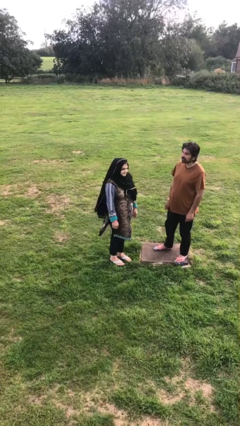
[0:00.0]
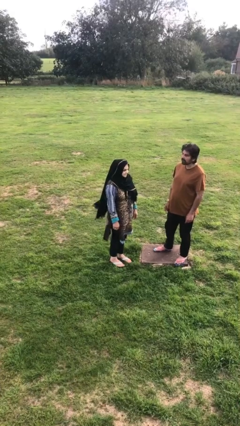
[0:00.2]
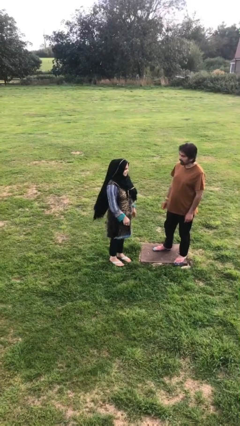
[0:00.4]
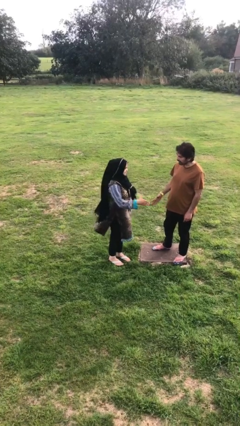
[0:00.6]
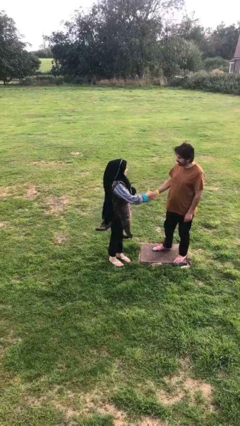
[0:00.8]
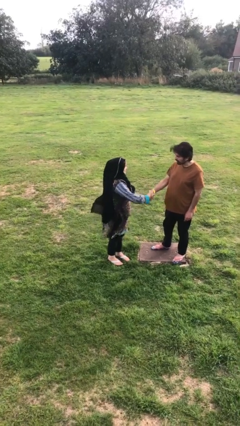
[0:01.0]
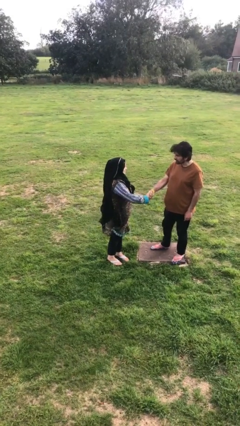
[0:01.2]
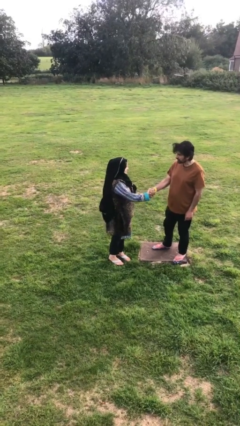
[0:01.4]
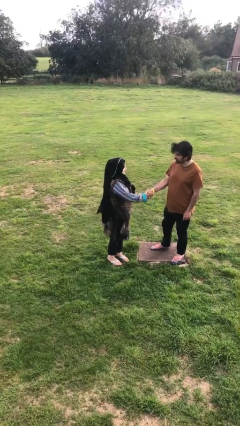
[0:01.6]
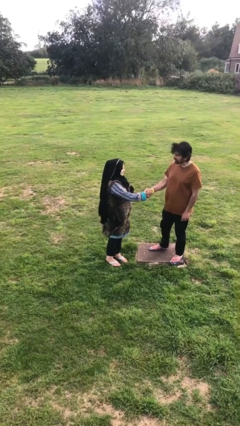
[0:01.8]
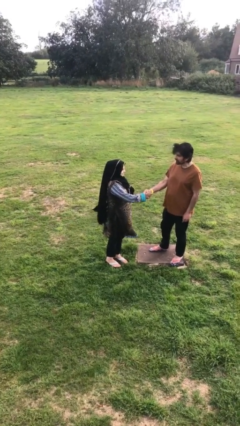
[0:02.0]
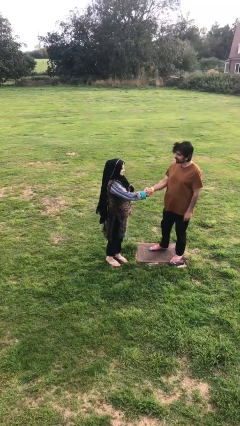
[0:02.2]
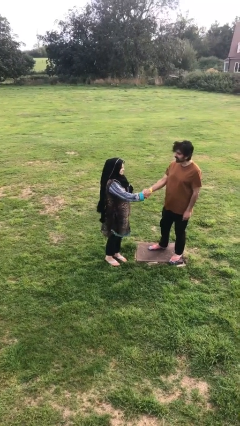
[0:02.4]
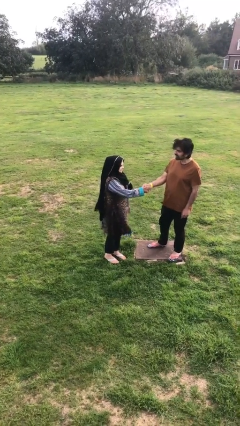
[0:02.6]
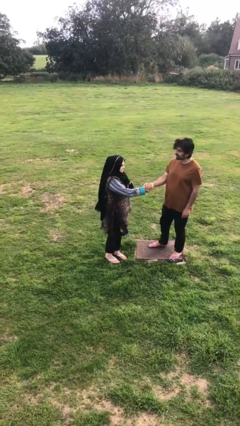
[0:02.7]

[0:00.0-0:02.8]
person shakes hand

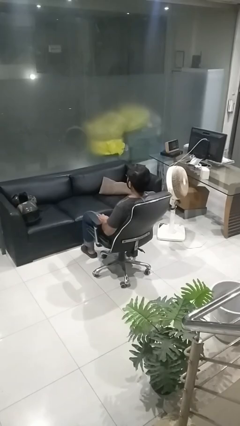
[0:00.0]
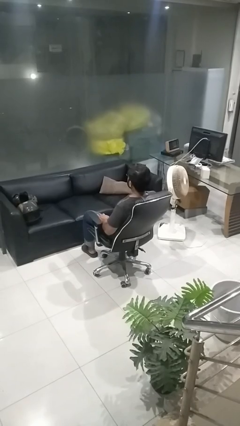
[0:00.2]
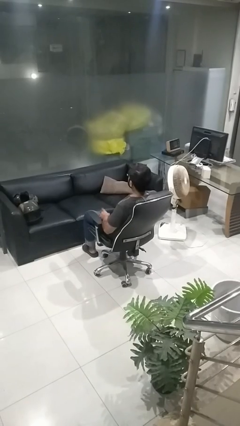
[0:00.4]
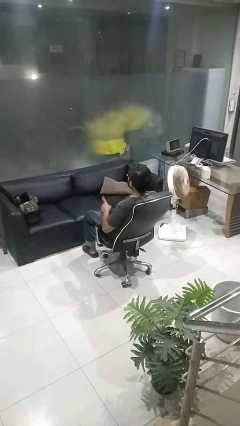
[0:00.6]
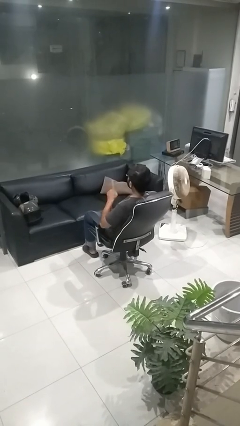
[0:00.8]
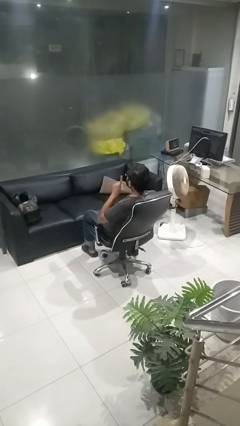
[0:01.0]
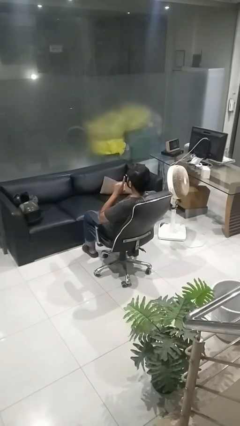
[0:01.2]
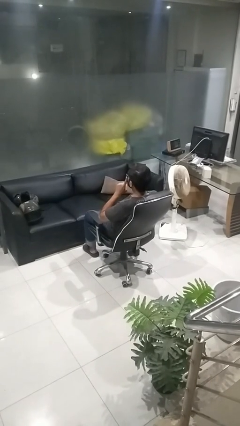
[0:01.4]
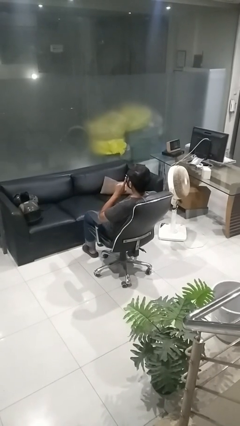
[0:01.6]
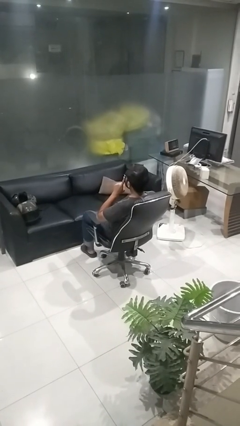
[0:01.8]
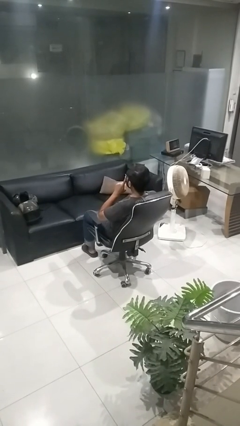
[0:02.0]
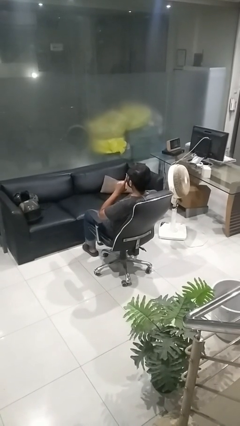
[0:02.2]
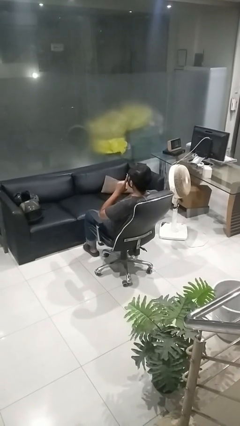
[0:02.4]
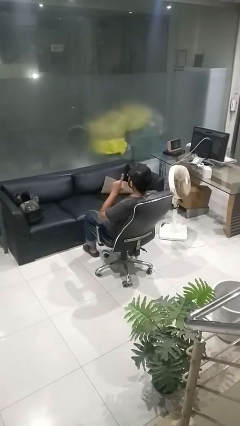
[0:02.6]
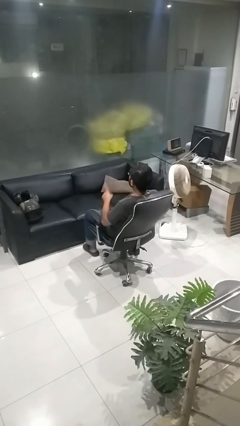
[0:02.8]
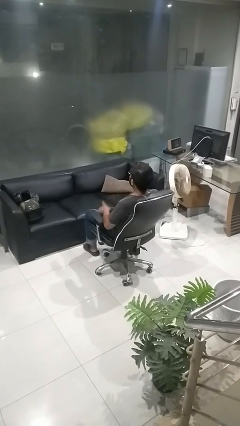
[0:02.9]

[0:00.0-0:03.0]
person gestures be quiet

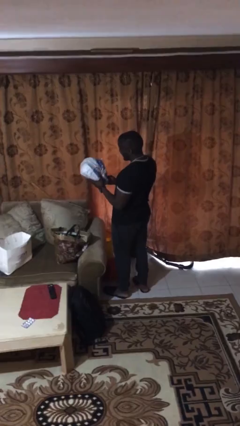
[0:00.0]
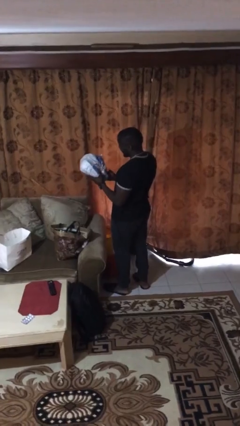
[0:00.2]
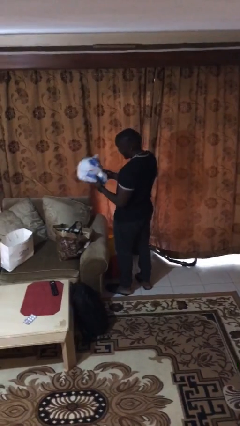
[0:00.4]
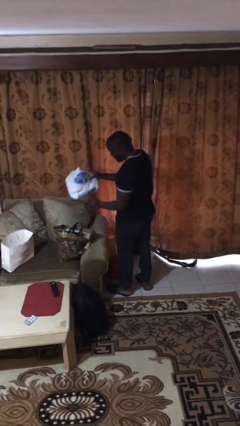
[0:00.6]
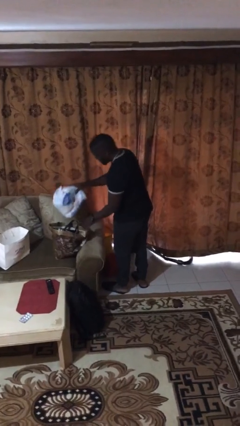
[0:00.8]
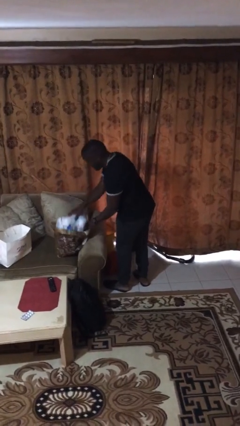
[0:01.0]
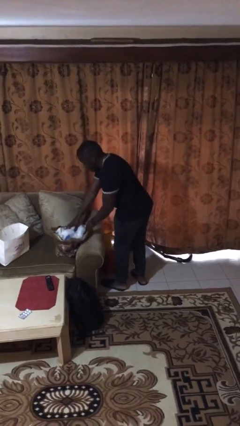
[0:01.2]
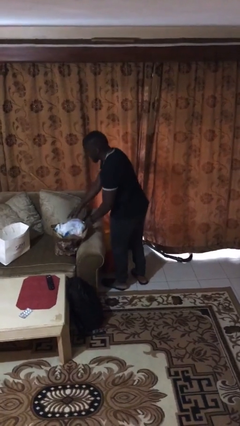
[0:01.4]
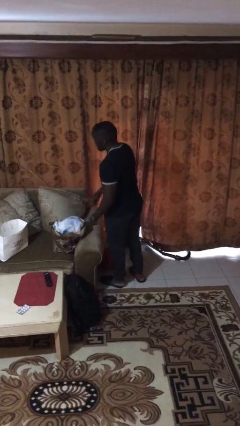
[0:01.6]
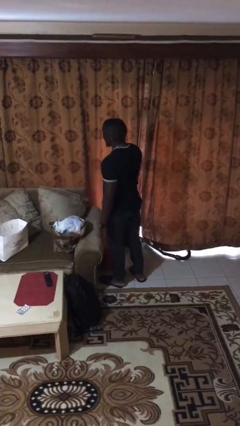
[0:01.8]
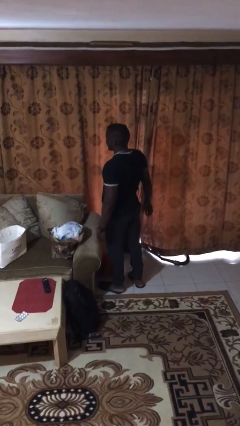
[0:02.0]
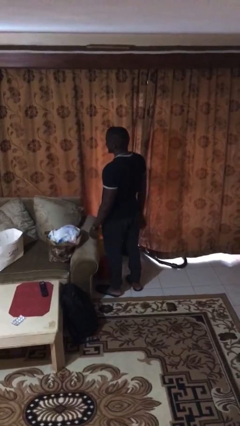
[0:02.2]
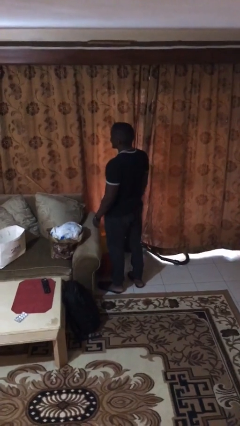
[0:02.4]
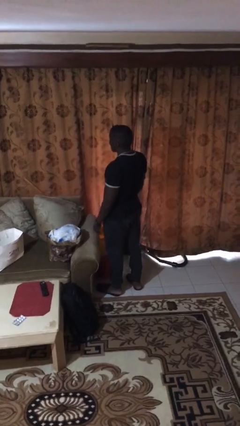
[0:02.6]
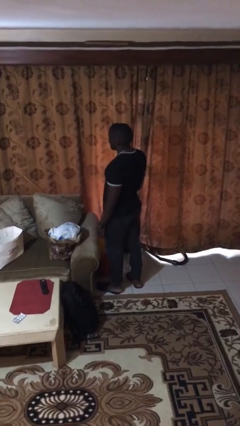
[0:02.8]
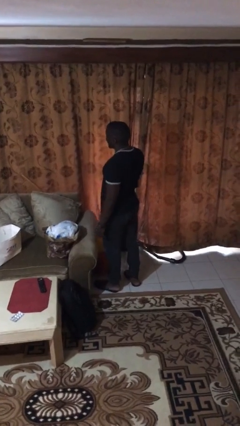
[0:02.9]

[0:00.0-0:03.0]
person puts object into bag

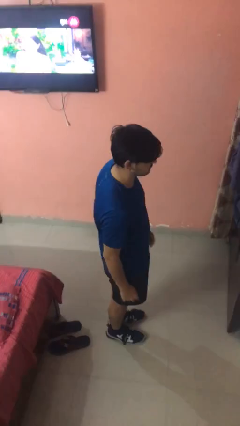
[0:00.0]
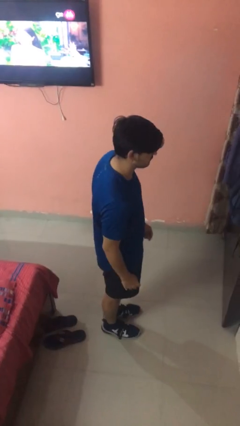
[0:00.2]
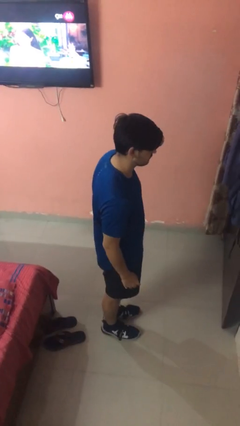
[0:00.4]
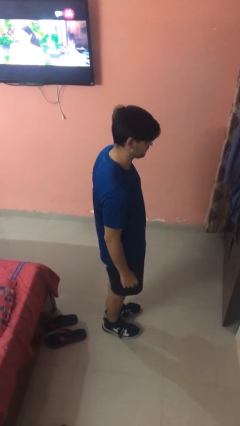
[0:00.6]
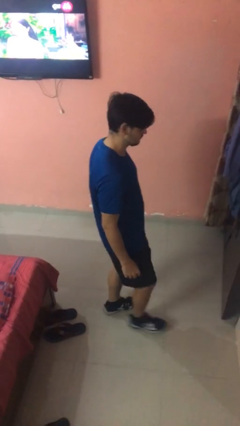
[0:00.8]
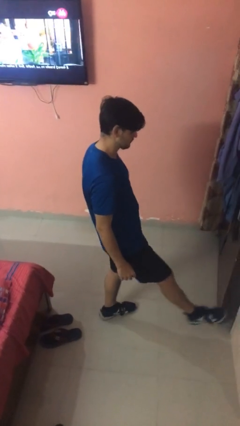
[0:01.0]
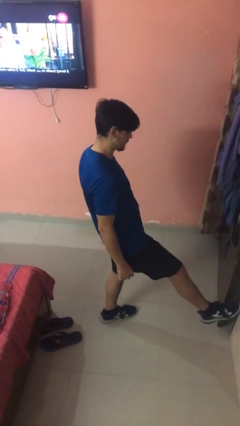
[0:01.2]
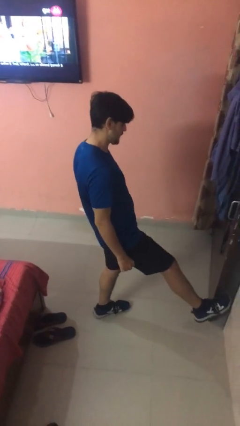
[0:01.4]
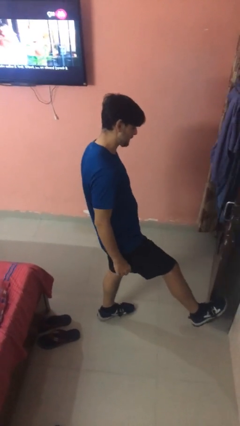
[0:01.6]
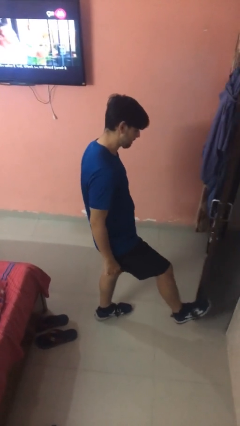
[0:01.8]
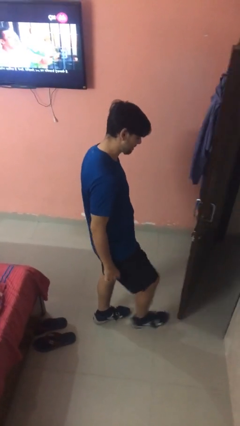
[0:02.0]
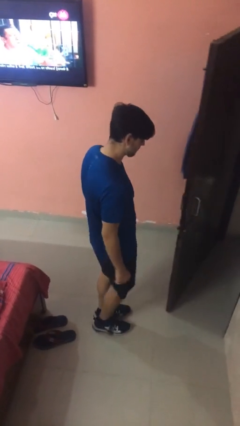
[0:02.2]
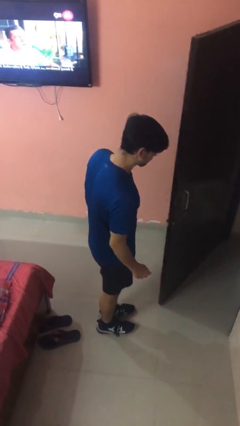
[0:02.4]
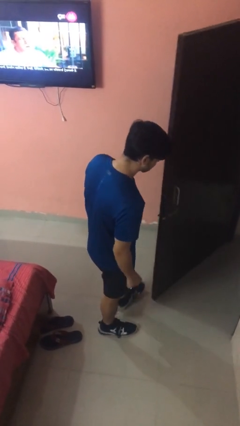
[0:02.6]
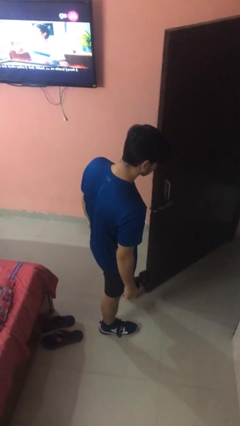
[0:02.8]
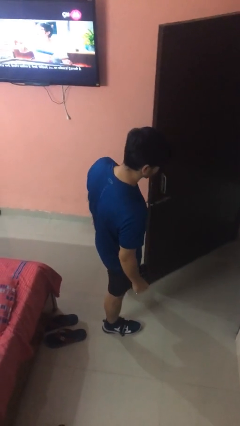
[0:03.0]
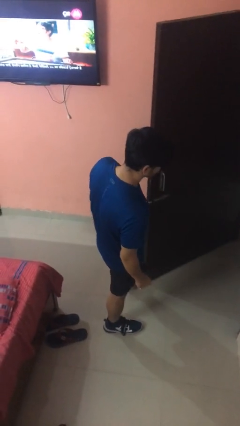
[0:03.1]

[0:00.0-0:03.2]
person opens facility door

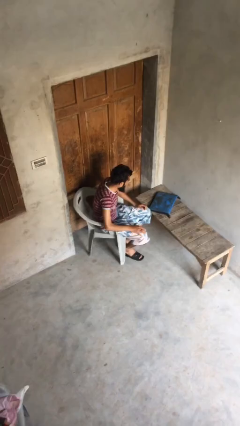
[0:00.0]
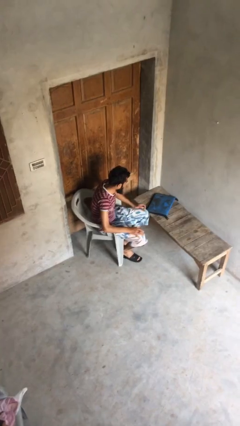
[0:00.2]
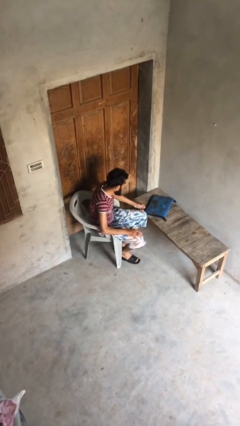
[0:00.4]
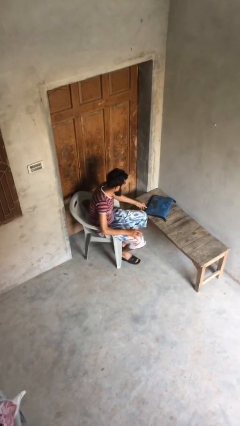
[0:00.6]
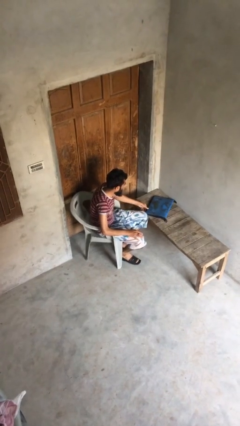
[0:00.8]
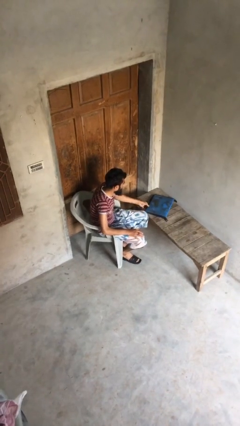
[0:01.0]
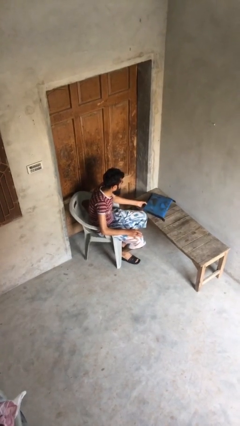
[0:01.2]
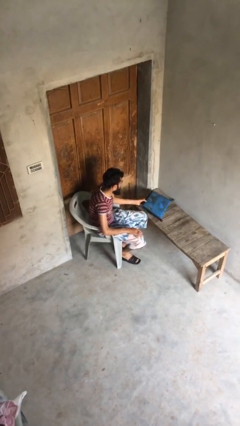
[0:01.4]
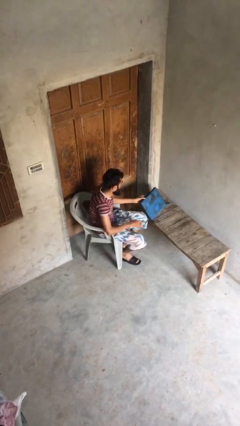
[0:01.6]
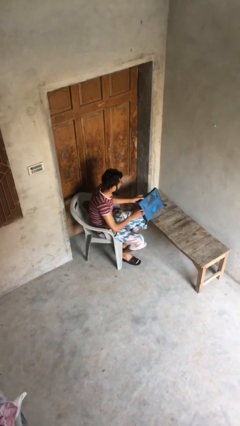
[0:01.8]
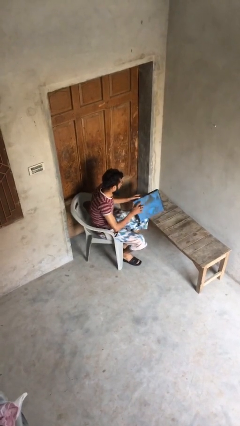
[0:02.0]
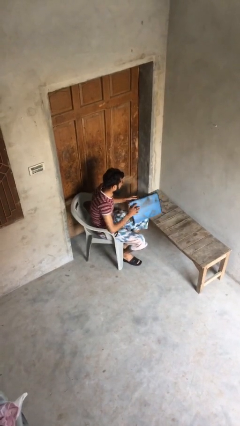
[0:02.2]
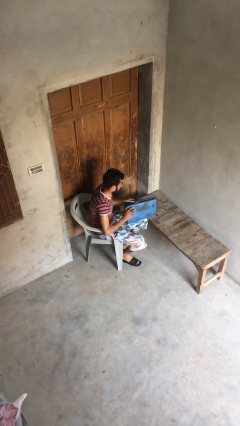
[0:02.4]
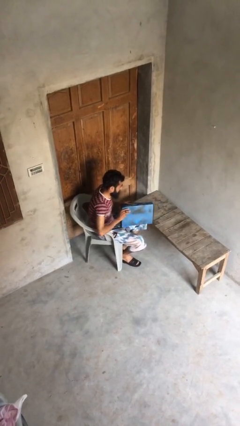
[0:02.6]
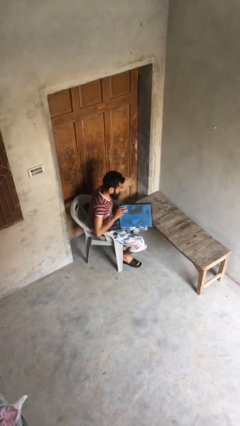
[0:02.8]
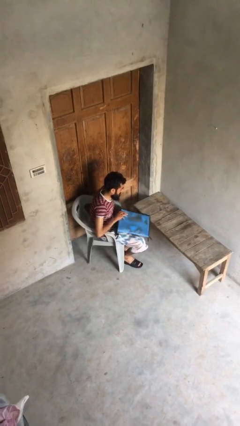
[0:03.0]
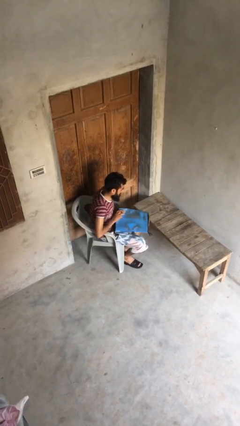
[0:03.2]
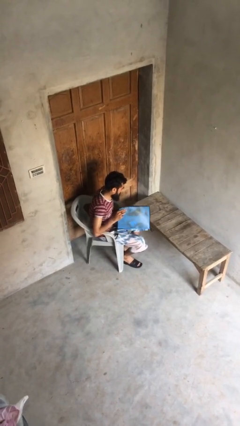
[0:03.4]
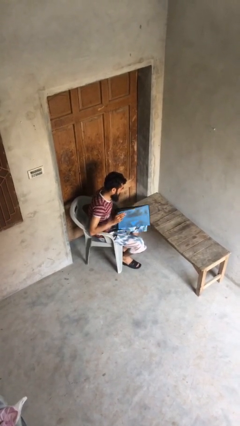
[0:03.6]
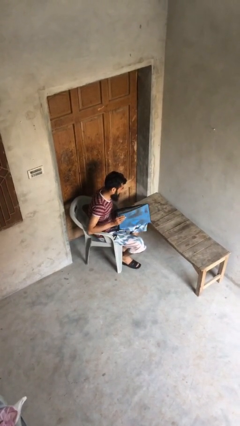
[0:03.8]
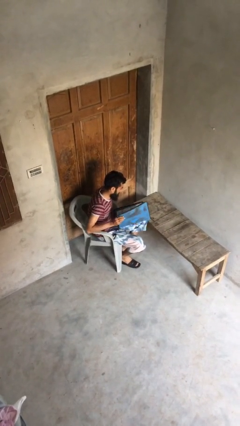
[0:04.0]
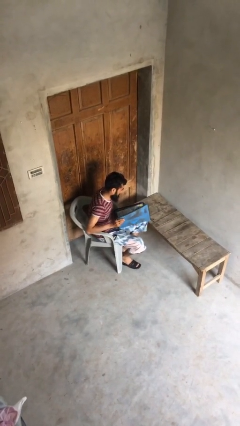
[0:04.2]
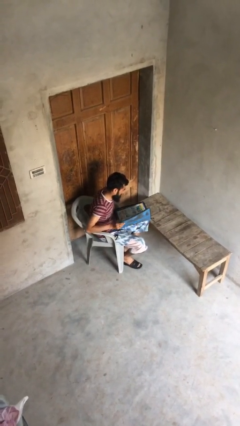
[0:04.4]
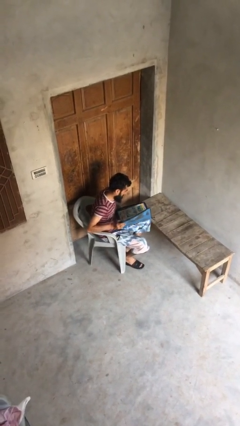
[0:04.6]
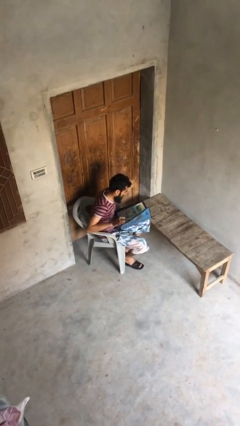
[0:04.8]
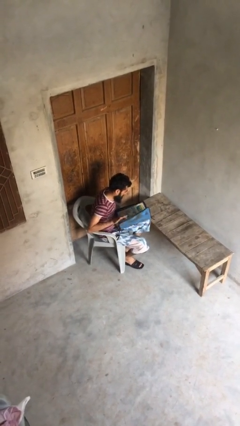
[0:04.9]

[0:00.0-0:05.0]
person reads document

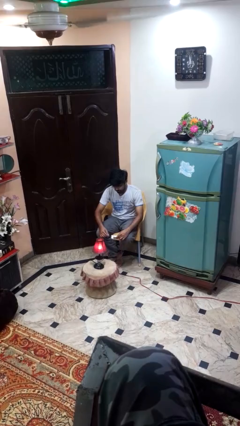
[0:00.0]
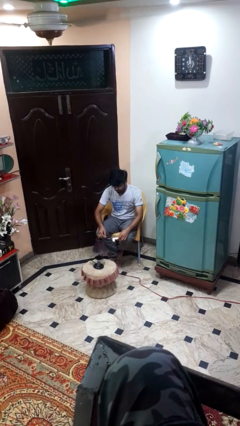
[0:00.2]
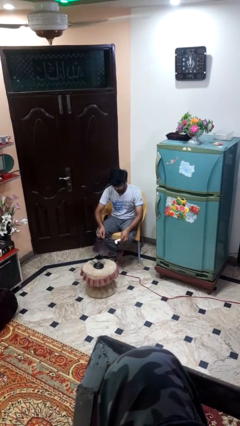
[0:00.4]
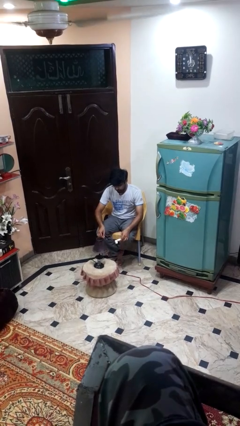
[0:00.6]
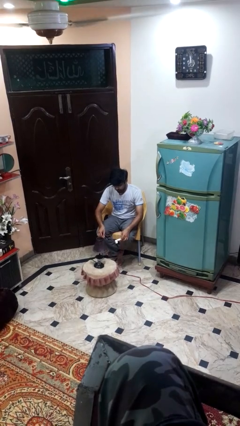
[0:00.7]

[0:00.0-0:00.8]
person turns off lamp
